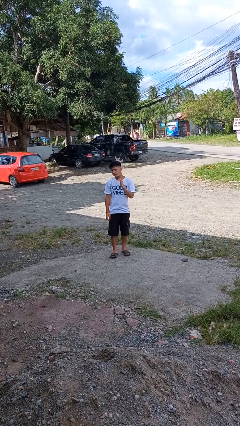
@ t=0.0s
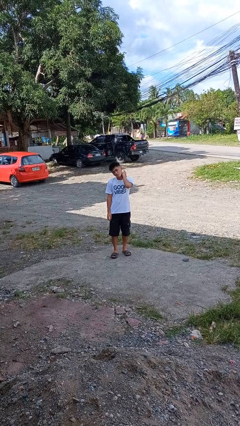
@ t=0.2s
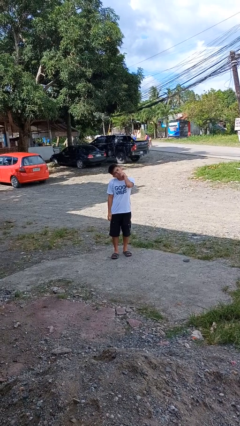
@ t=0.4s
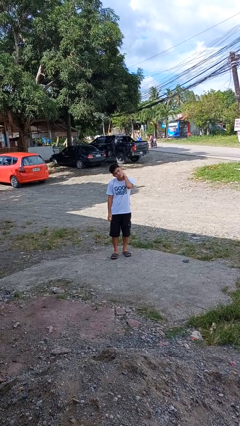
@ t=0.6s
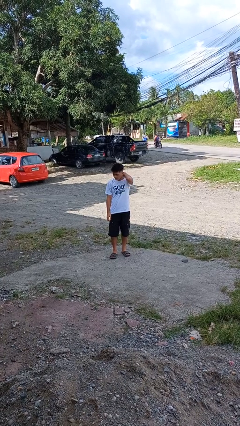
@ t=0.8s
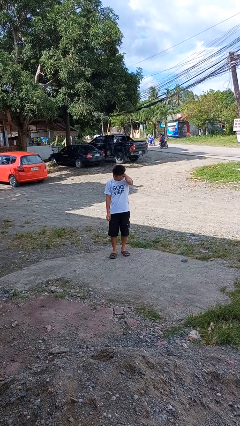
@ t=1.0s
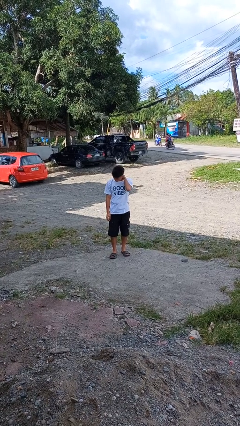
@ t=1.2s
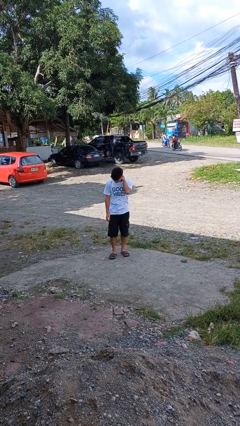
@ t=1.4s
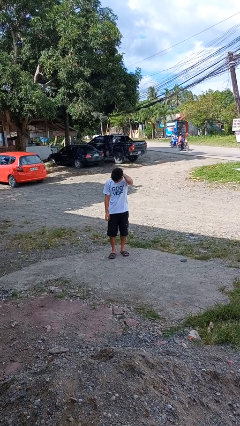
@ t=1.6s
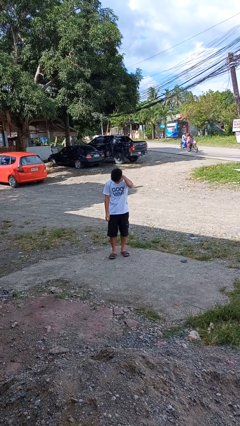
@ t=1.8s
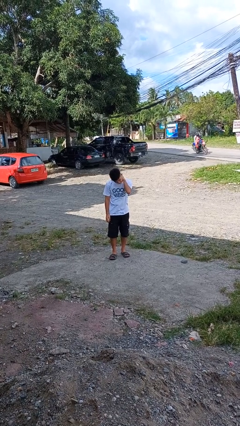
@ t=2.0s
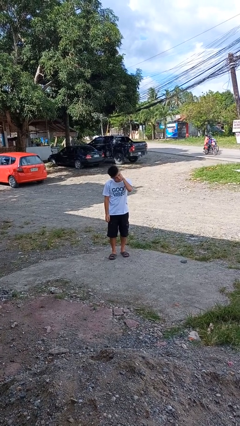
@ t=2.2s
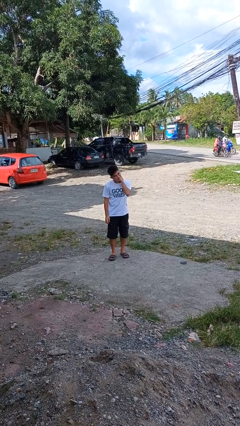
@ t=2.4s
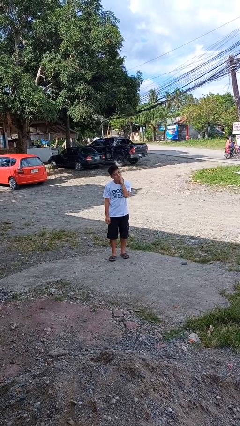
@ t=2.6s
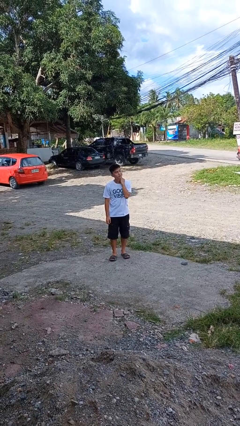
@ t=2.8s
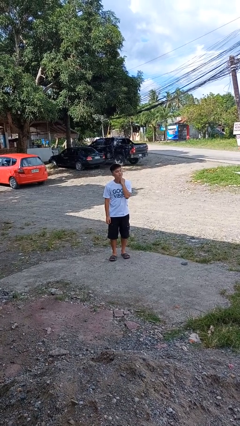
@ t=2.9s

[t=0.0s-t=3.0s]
person rubs neck

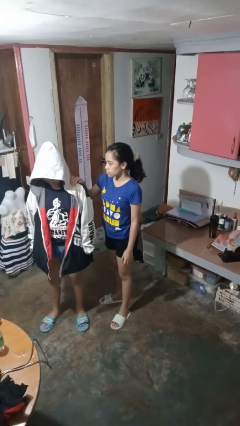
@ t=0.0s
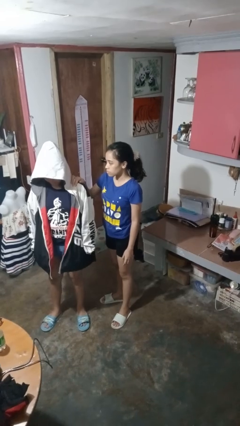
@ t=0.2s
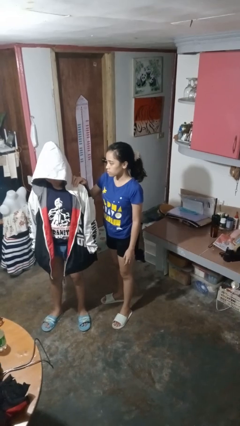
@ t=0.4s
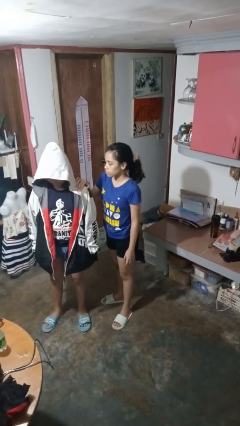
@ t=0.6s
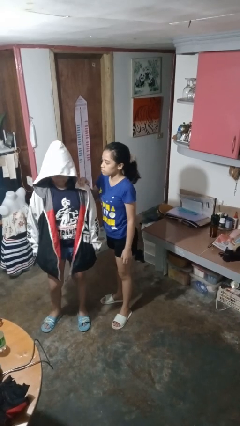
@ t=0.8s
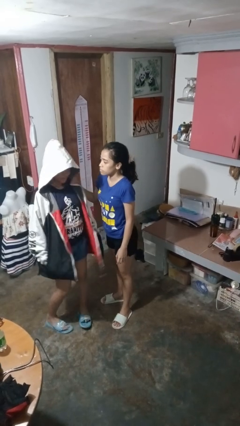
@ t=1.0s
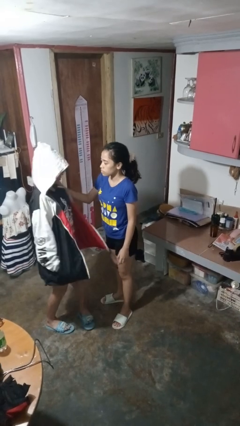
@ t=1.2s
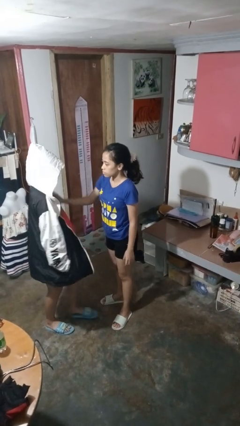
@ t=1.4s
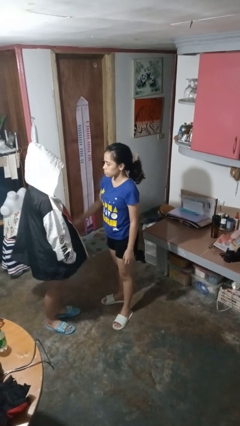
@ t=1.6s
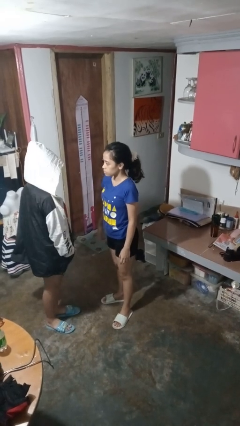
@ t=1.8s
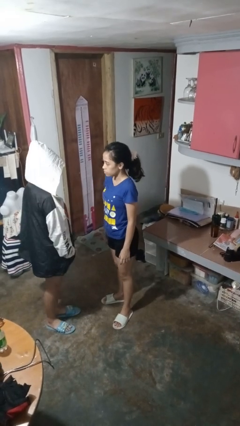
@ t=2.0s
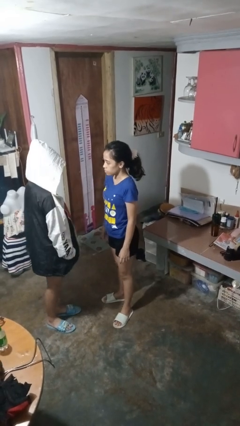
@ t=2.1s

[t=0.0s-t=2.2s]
person spins person around

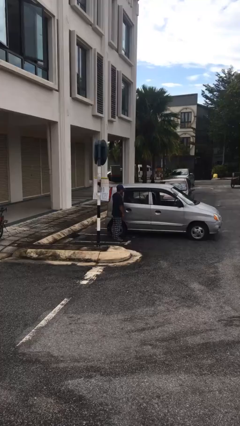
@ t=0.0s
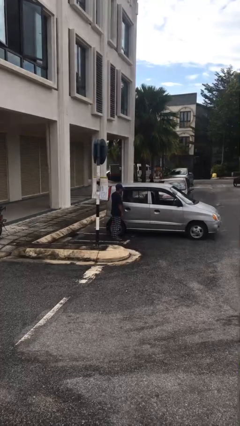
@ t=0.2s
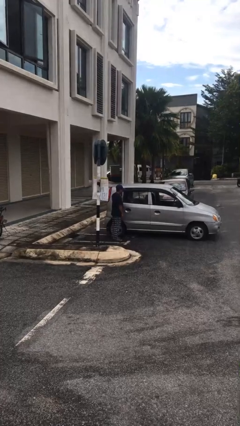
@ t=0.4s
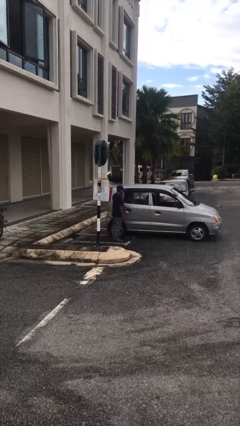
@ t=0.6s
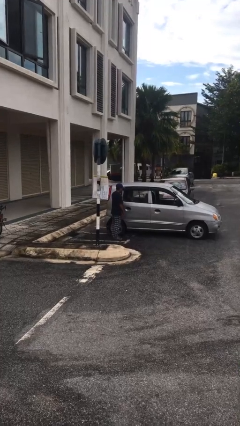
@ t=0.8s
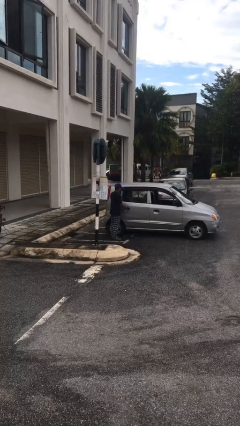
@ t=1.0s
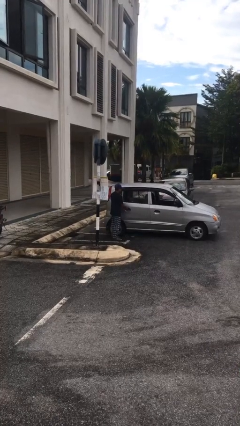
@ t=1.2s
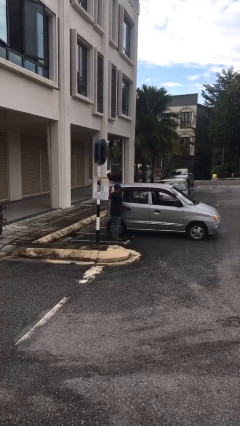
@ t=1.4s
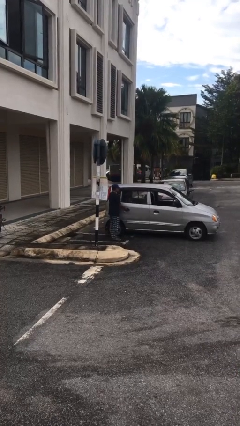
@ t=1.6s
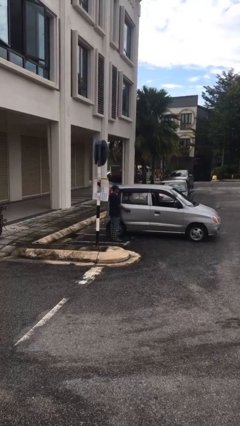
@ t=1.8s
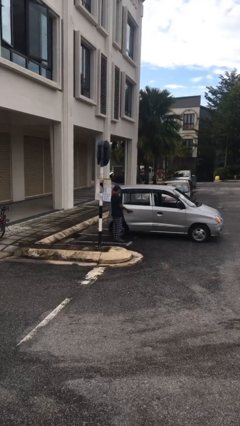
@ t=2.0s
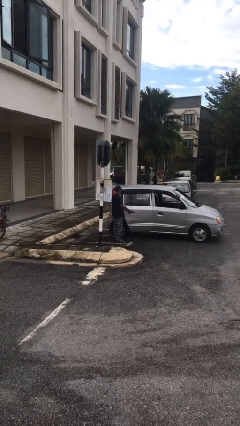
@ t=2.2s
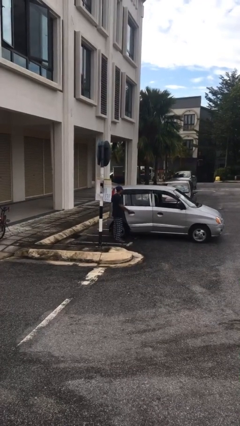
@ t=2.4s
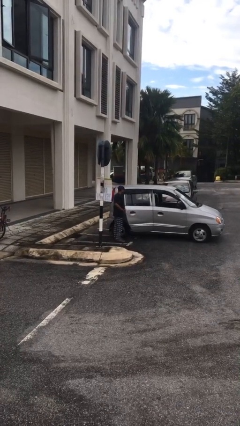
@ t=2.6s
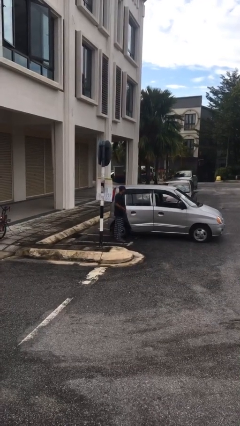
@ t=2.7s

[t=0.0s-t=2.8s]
person opens car door

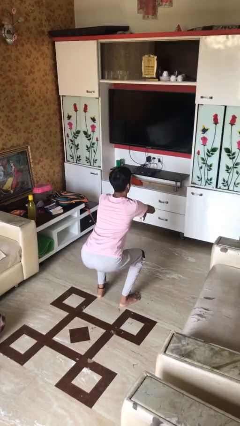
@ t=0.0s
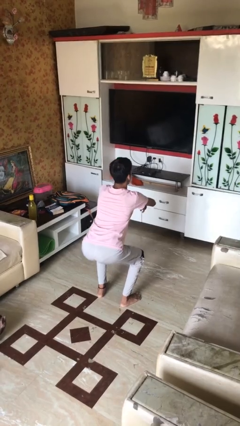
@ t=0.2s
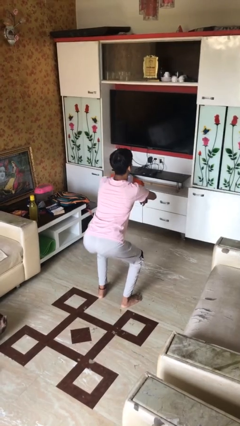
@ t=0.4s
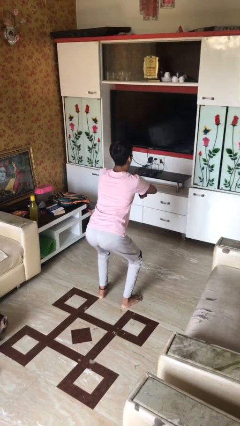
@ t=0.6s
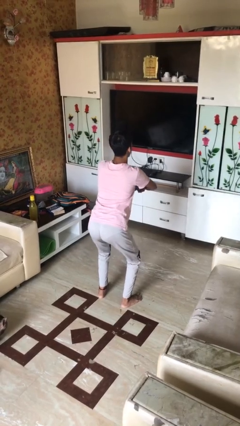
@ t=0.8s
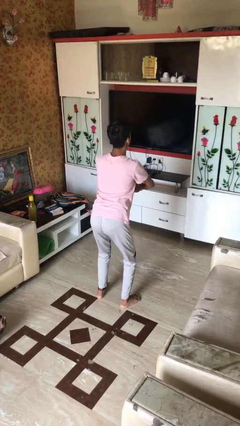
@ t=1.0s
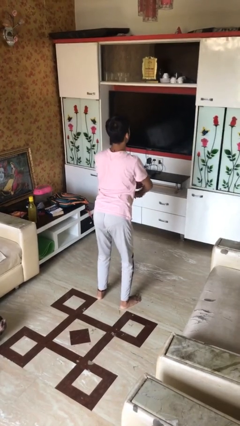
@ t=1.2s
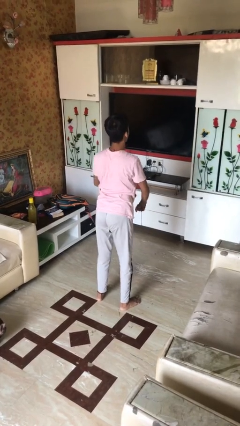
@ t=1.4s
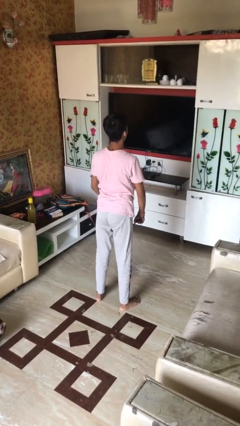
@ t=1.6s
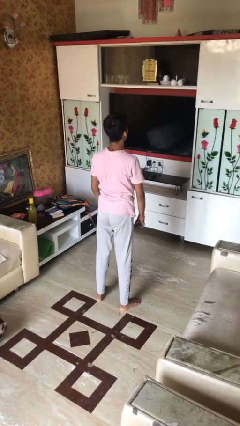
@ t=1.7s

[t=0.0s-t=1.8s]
person stands up

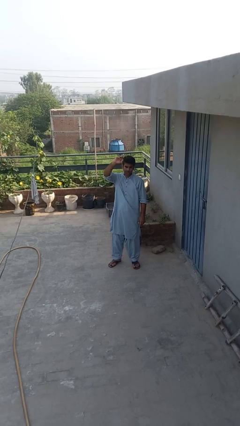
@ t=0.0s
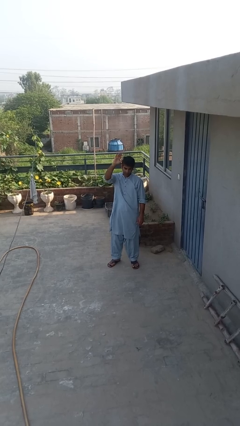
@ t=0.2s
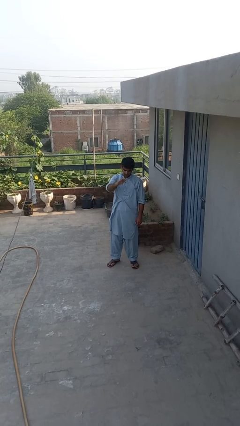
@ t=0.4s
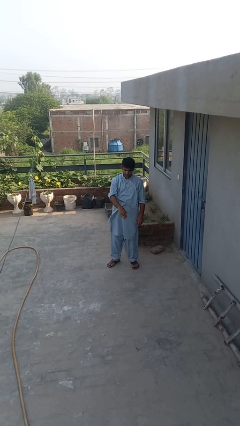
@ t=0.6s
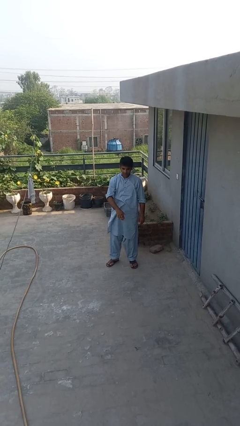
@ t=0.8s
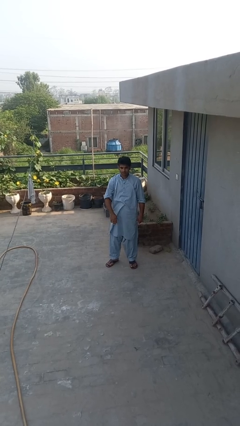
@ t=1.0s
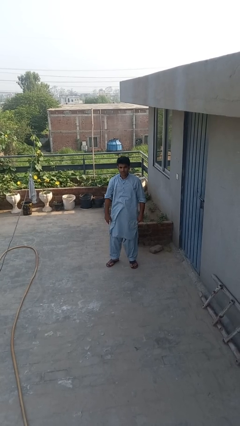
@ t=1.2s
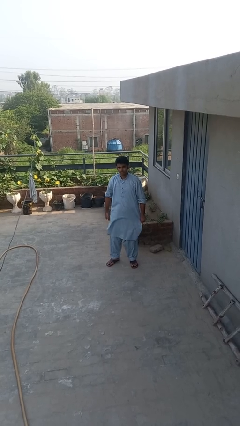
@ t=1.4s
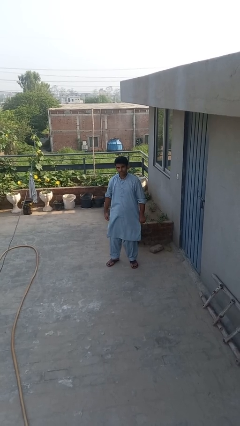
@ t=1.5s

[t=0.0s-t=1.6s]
person gestures swipe down

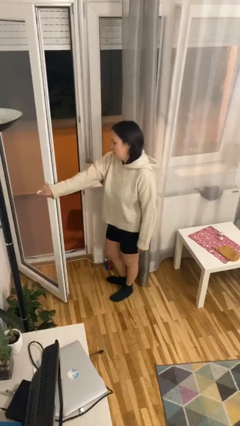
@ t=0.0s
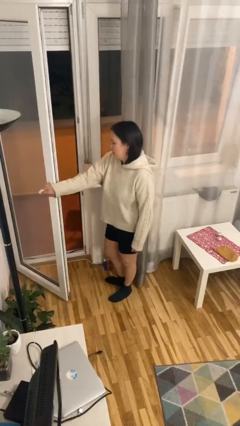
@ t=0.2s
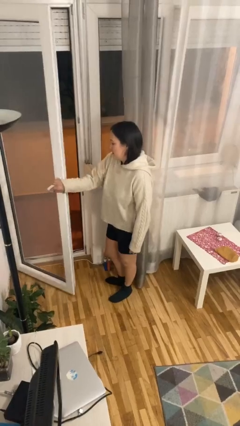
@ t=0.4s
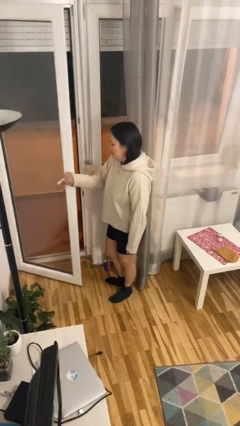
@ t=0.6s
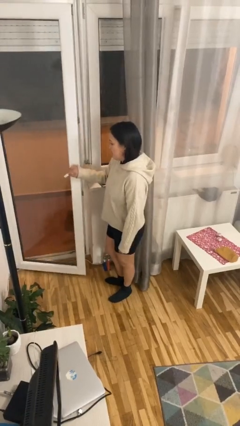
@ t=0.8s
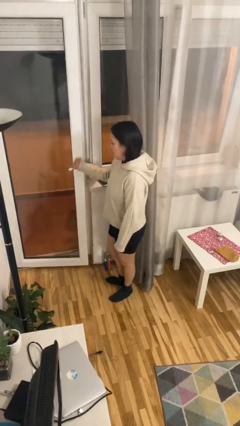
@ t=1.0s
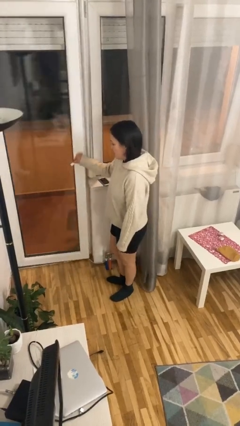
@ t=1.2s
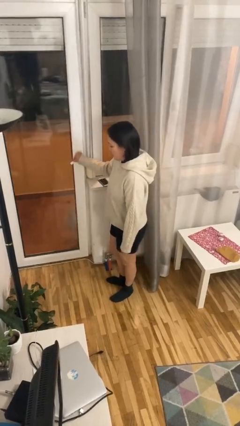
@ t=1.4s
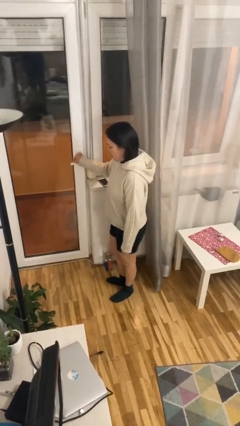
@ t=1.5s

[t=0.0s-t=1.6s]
person closes facility door

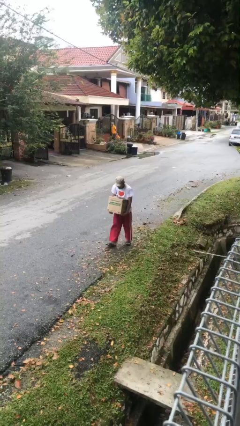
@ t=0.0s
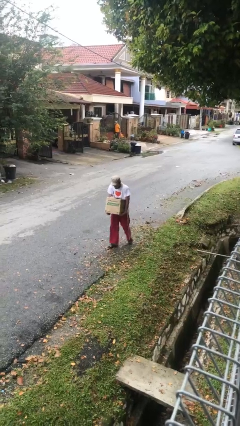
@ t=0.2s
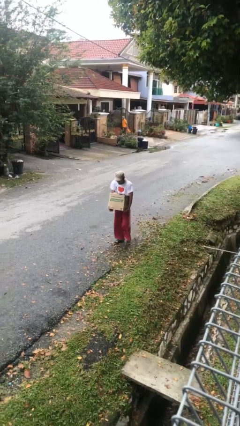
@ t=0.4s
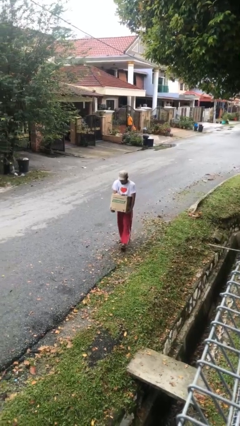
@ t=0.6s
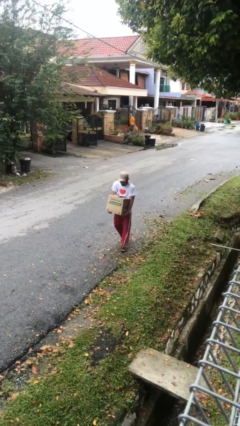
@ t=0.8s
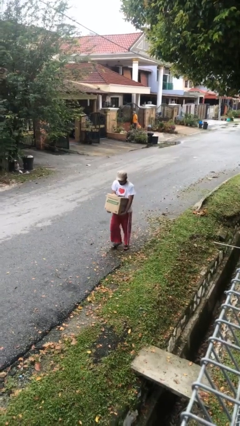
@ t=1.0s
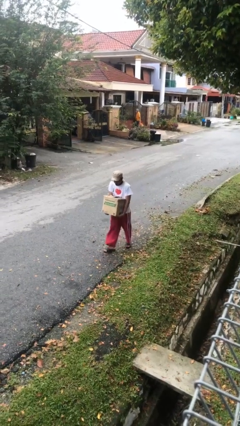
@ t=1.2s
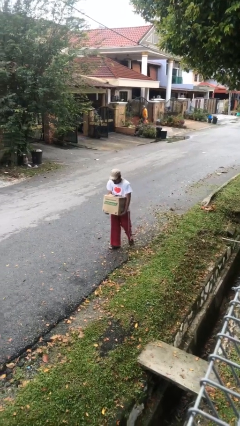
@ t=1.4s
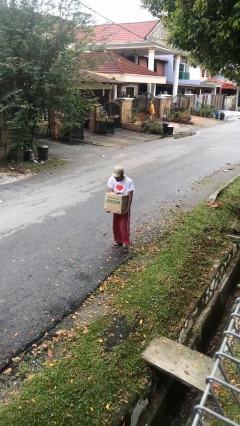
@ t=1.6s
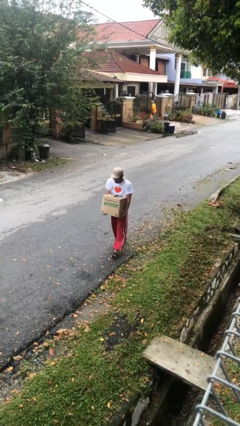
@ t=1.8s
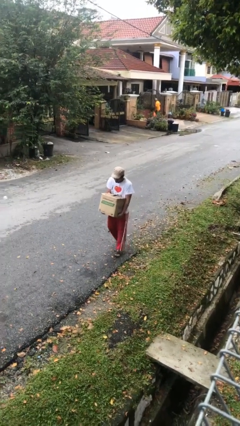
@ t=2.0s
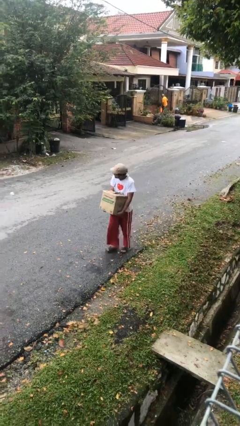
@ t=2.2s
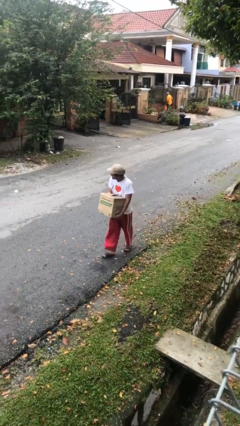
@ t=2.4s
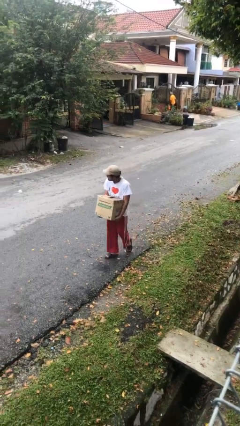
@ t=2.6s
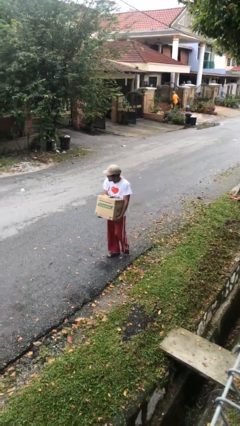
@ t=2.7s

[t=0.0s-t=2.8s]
person carries heavy object

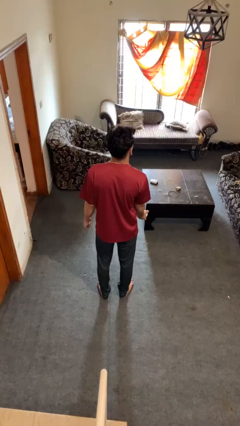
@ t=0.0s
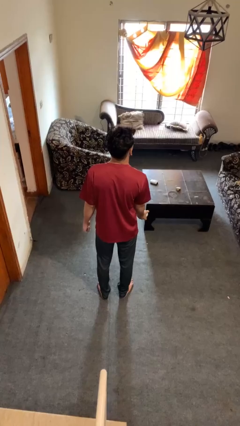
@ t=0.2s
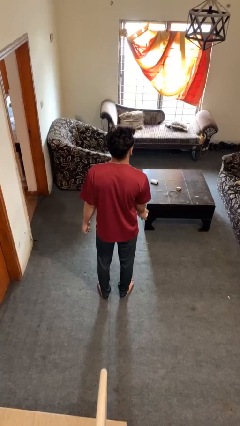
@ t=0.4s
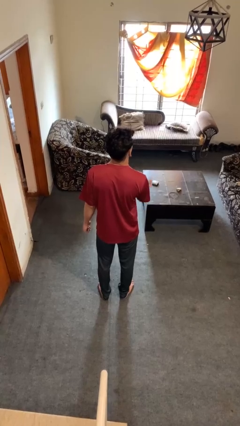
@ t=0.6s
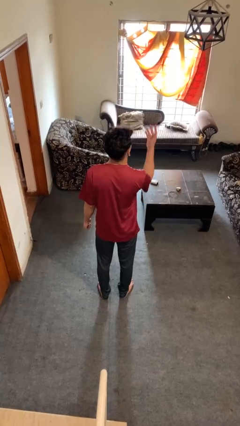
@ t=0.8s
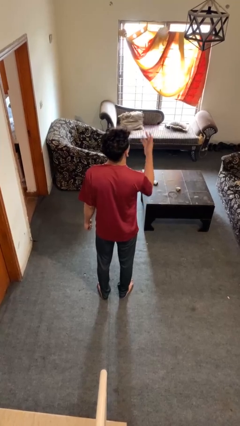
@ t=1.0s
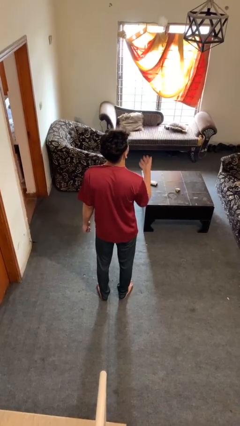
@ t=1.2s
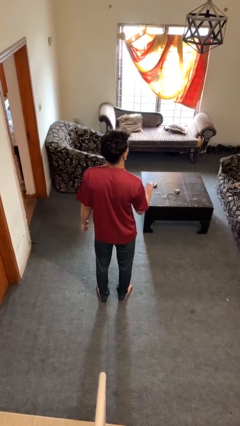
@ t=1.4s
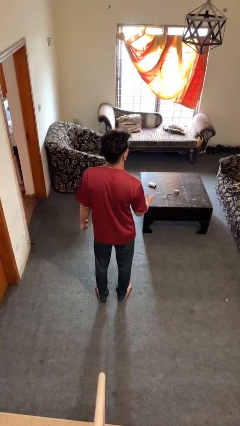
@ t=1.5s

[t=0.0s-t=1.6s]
person drops object
